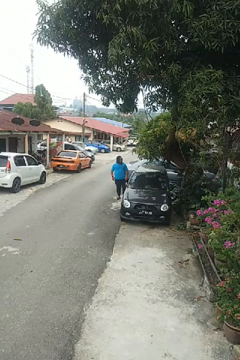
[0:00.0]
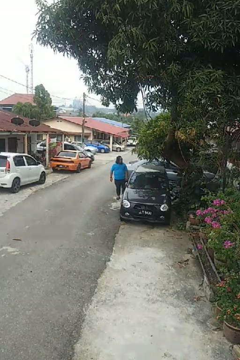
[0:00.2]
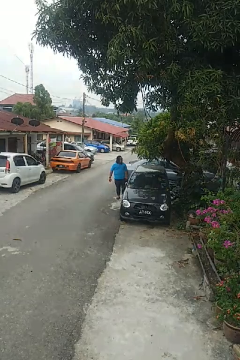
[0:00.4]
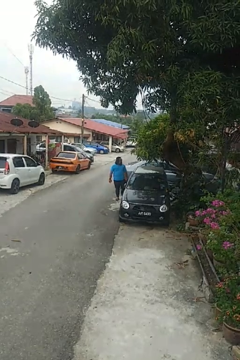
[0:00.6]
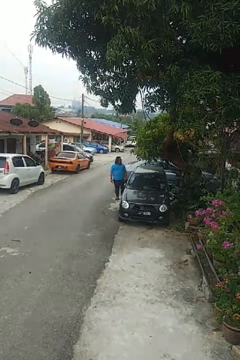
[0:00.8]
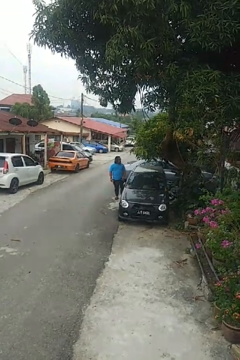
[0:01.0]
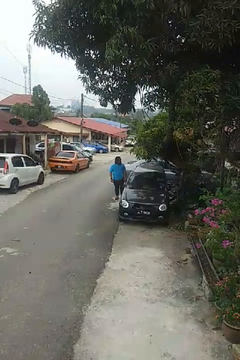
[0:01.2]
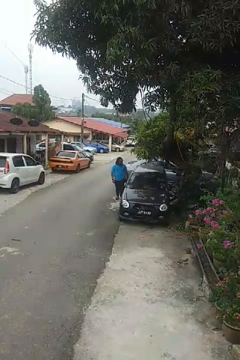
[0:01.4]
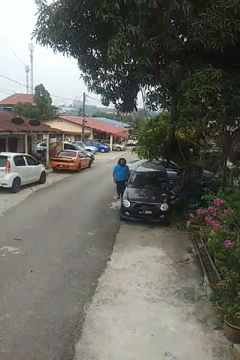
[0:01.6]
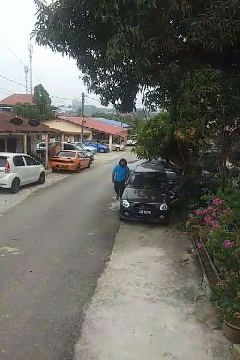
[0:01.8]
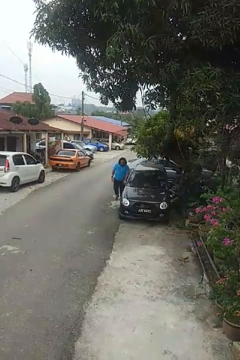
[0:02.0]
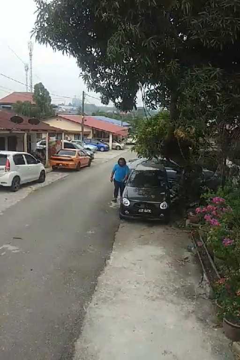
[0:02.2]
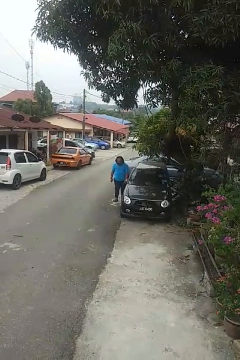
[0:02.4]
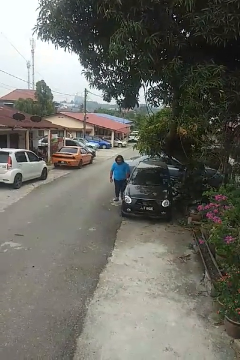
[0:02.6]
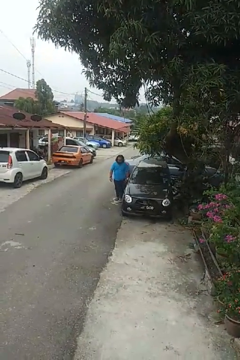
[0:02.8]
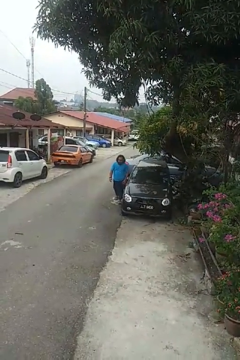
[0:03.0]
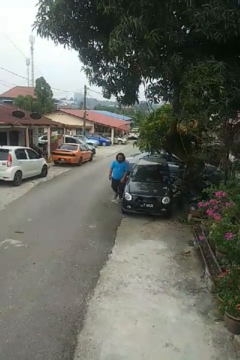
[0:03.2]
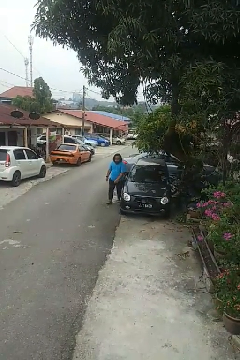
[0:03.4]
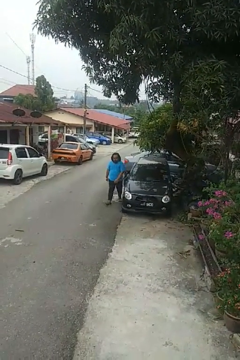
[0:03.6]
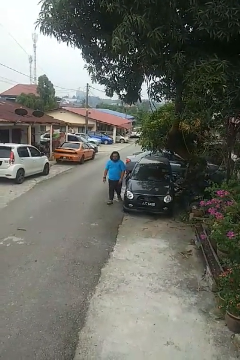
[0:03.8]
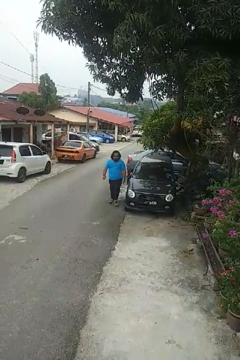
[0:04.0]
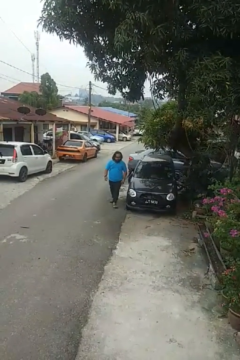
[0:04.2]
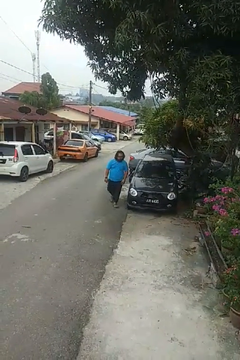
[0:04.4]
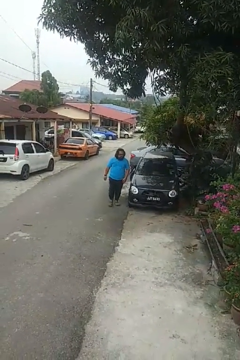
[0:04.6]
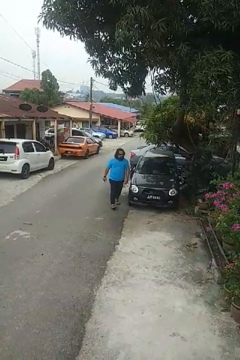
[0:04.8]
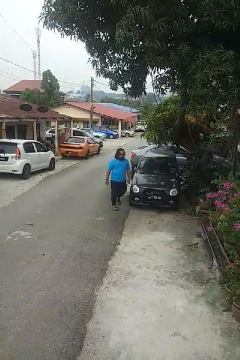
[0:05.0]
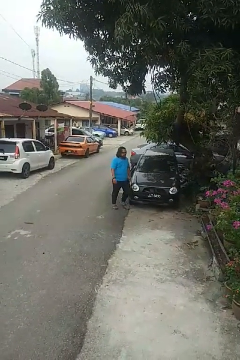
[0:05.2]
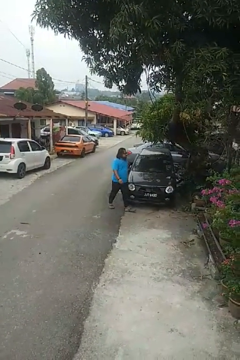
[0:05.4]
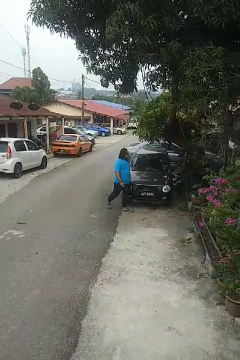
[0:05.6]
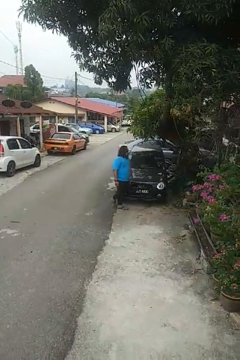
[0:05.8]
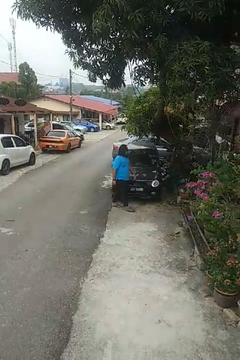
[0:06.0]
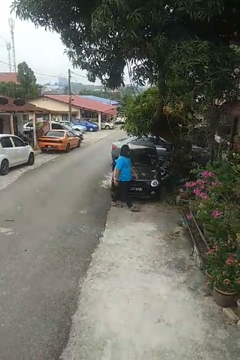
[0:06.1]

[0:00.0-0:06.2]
person walks around car

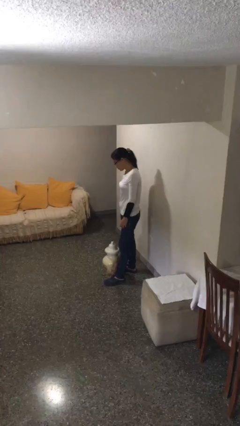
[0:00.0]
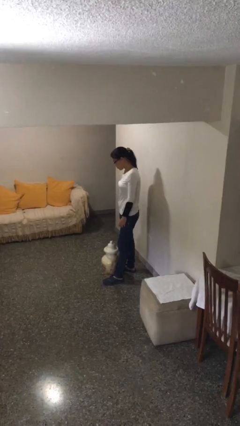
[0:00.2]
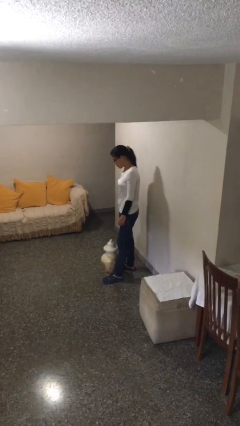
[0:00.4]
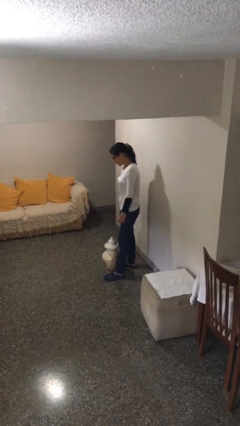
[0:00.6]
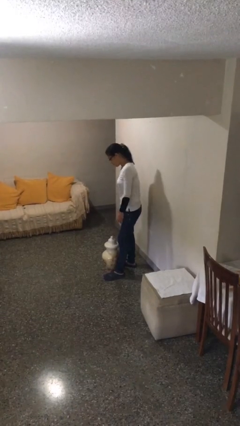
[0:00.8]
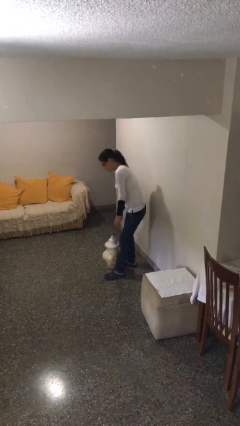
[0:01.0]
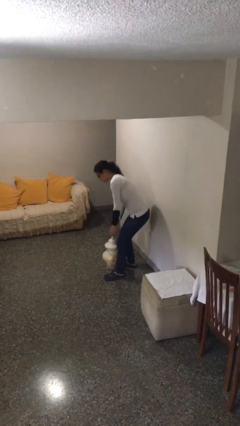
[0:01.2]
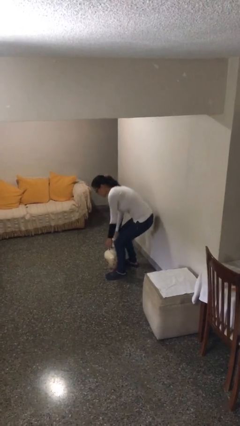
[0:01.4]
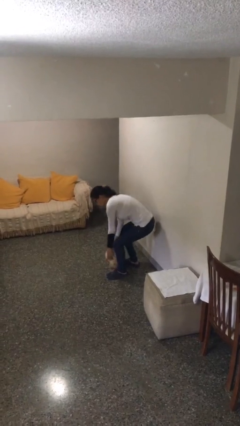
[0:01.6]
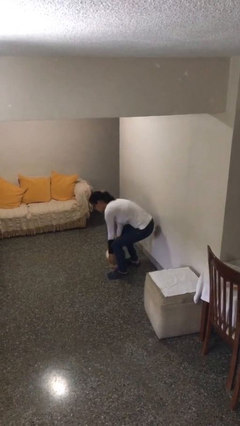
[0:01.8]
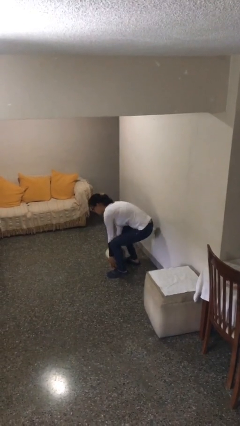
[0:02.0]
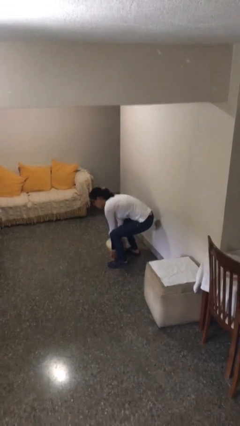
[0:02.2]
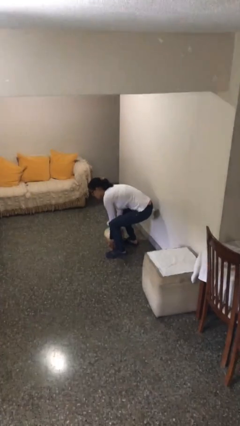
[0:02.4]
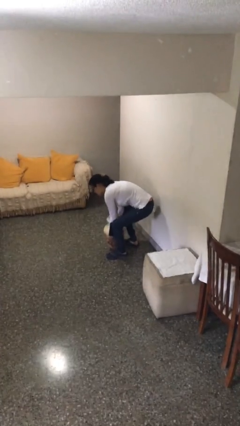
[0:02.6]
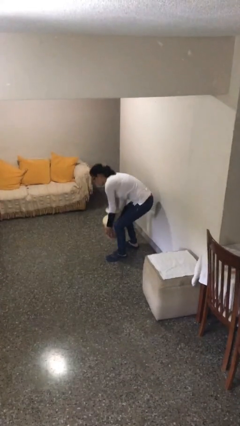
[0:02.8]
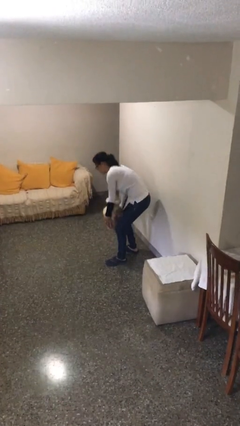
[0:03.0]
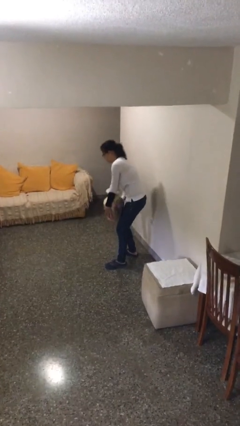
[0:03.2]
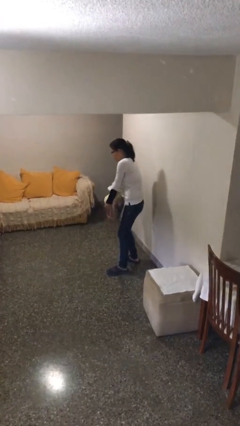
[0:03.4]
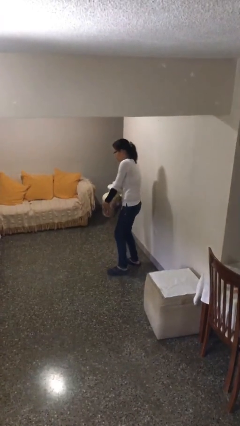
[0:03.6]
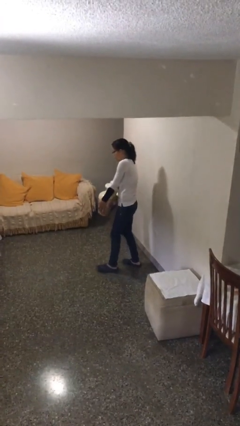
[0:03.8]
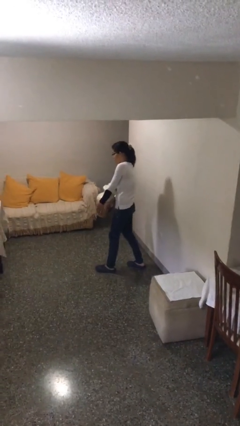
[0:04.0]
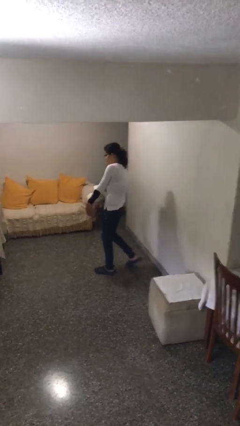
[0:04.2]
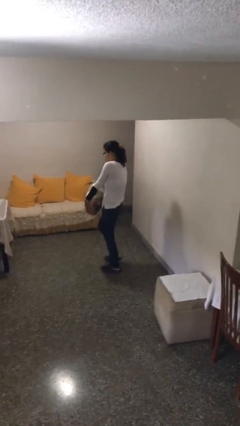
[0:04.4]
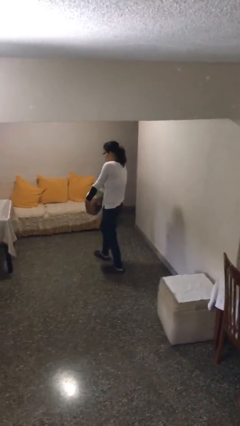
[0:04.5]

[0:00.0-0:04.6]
person picks up object from floor

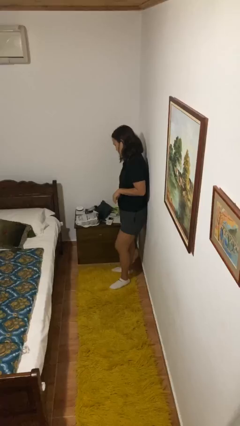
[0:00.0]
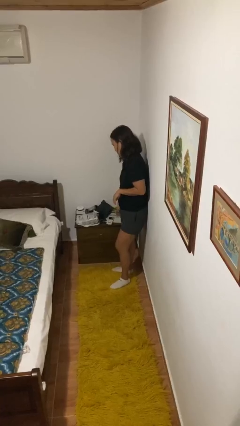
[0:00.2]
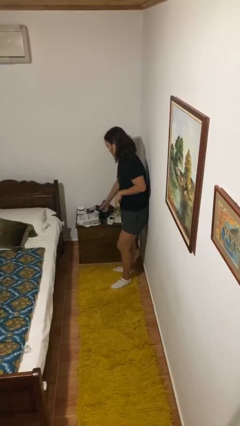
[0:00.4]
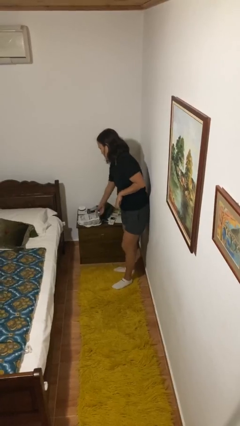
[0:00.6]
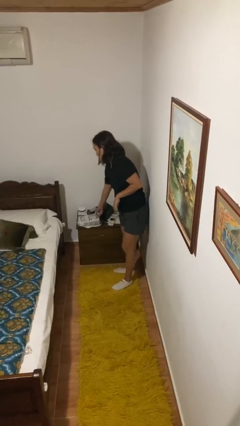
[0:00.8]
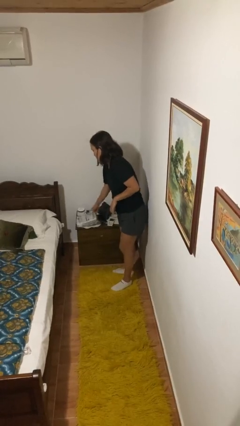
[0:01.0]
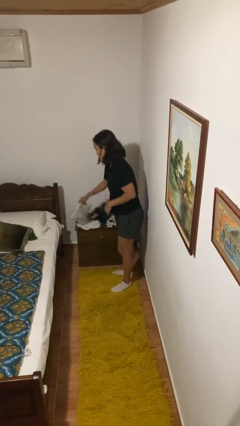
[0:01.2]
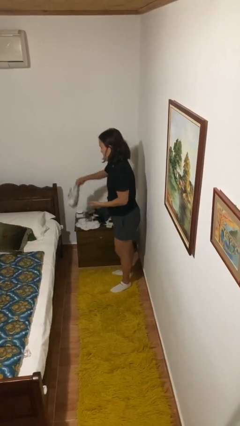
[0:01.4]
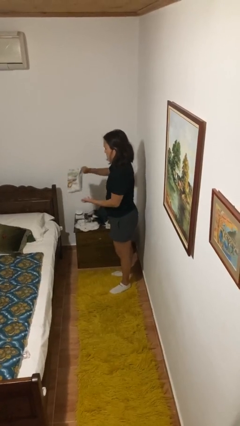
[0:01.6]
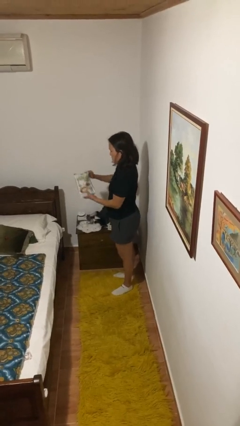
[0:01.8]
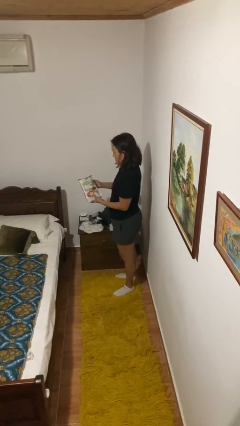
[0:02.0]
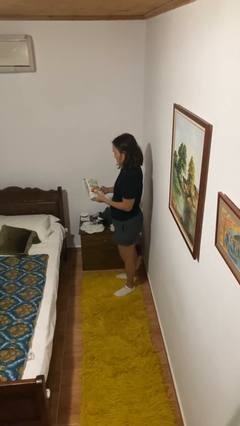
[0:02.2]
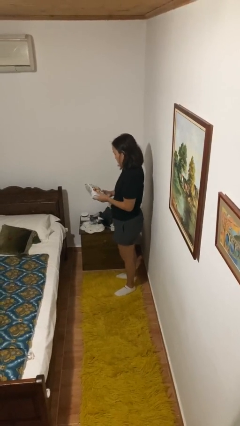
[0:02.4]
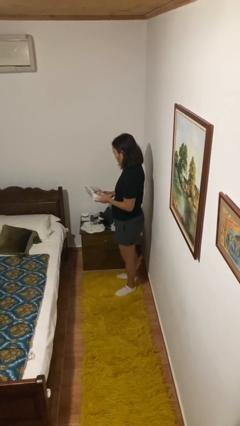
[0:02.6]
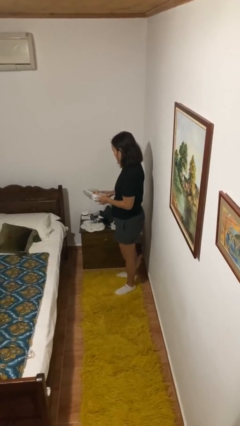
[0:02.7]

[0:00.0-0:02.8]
person picks up object from countertop

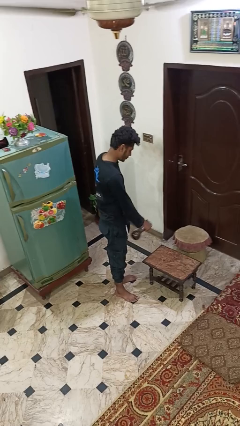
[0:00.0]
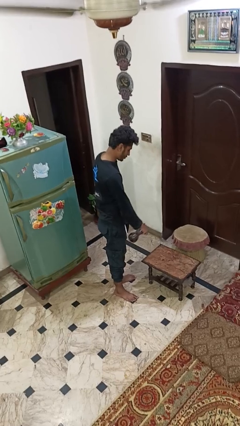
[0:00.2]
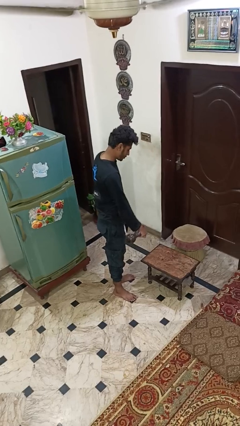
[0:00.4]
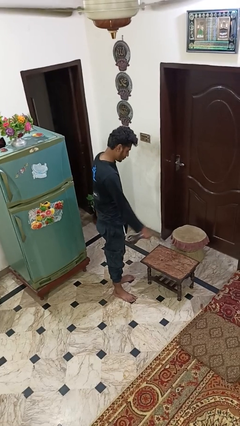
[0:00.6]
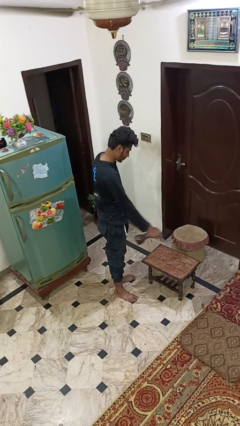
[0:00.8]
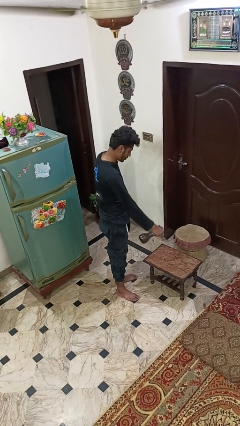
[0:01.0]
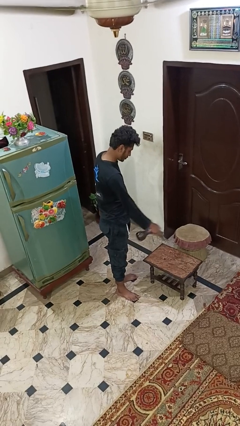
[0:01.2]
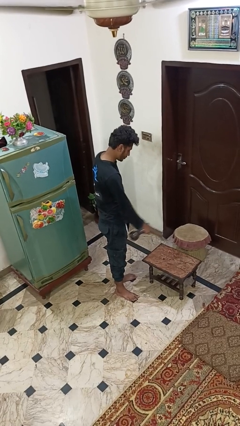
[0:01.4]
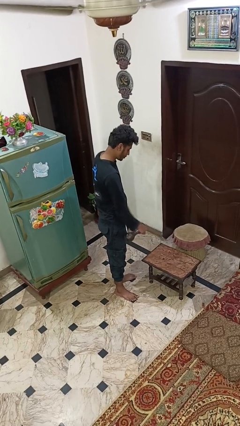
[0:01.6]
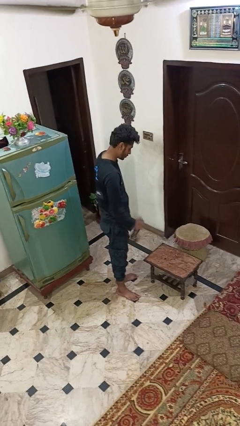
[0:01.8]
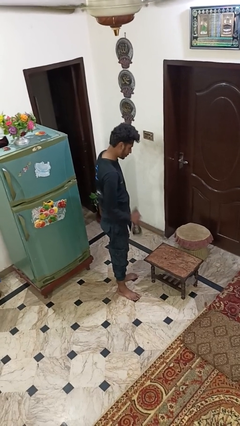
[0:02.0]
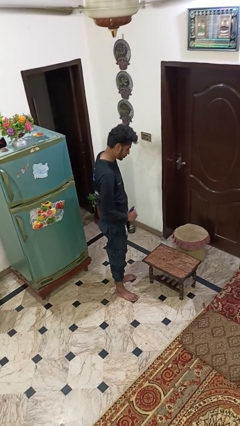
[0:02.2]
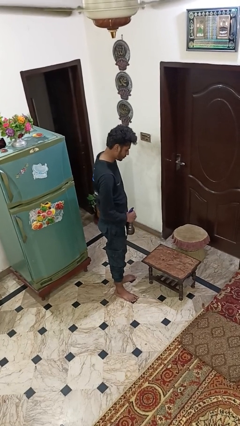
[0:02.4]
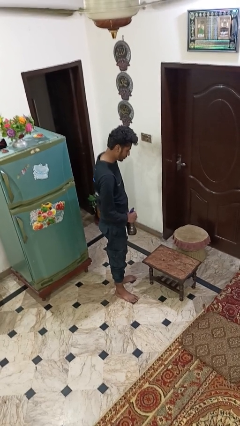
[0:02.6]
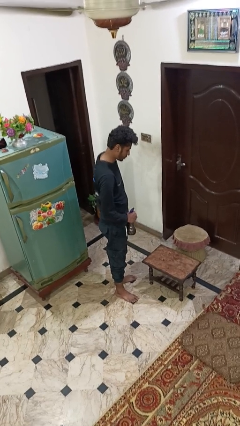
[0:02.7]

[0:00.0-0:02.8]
person sprays from bottle

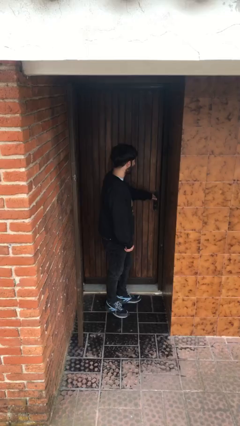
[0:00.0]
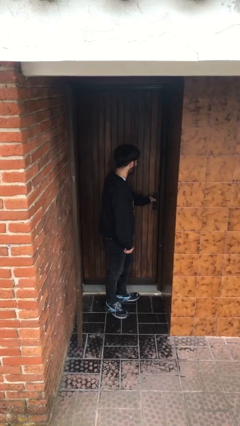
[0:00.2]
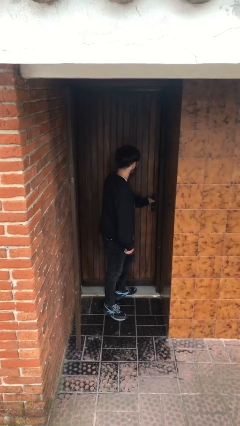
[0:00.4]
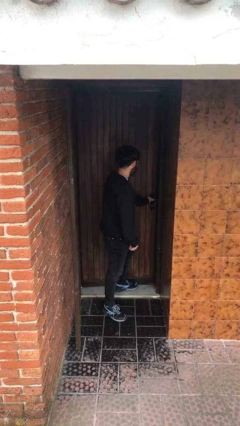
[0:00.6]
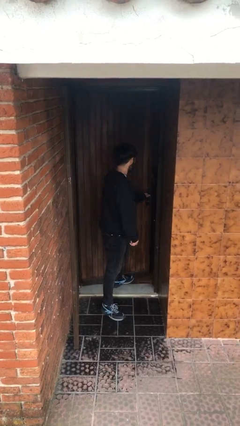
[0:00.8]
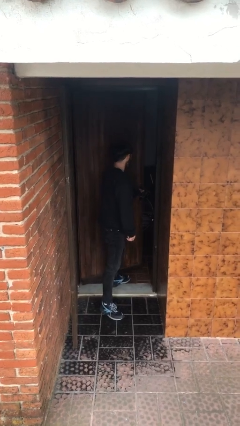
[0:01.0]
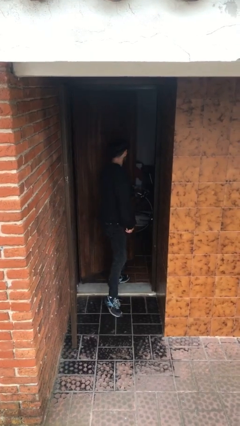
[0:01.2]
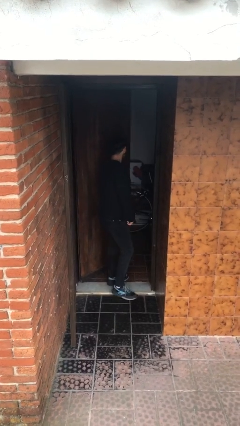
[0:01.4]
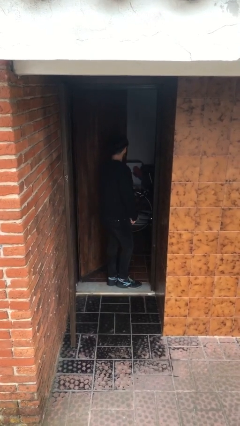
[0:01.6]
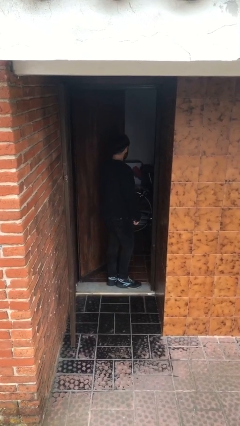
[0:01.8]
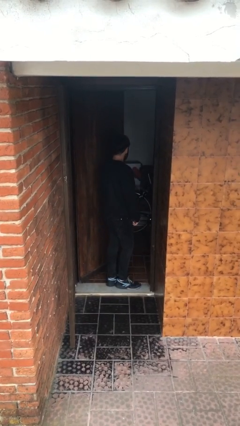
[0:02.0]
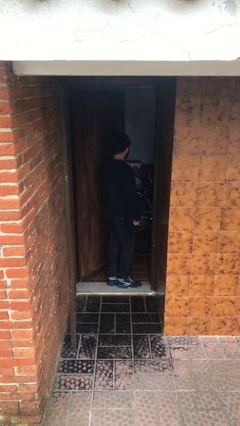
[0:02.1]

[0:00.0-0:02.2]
person opens facility door
